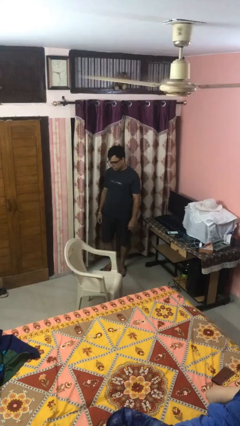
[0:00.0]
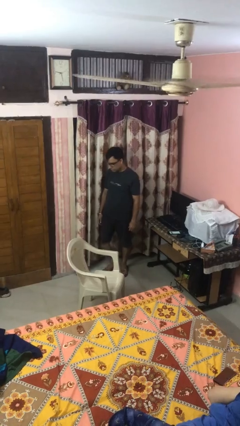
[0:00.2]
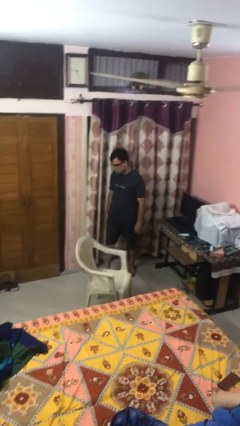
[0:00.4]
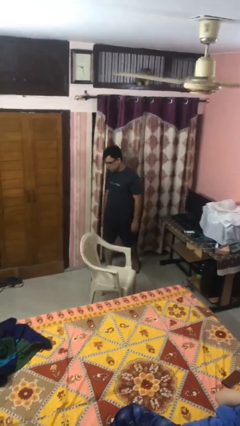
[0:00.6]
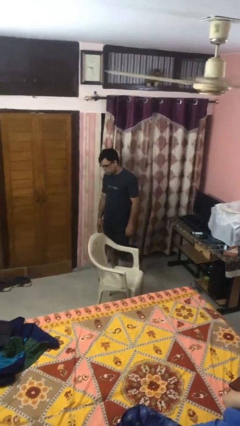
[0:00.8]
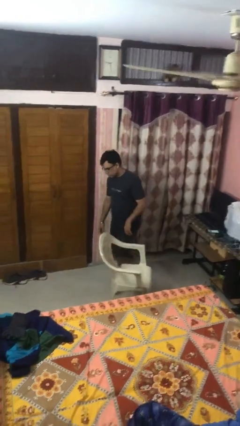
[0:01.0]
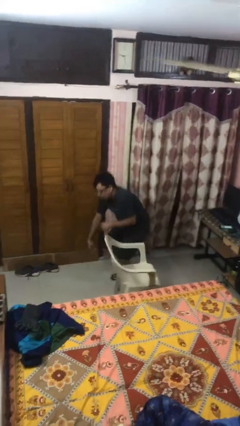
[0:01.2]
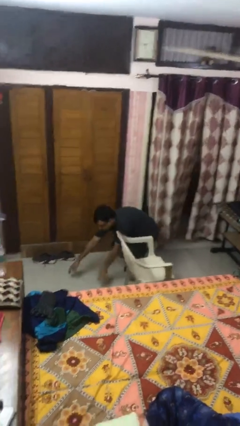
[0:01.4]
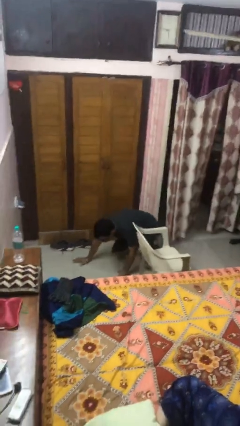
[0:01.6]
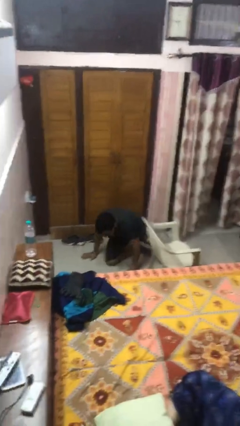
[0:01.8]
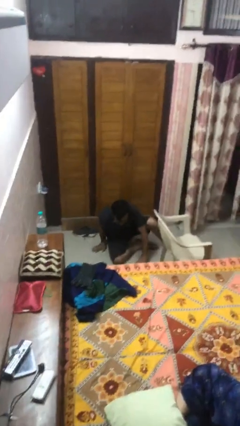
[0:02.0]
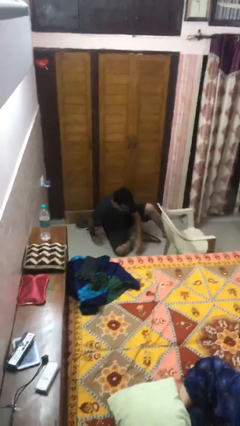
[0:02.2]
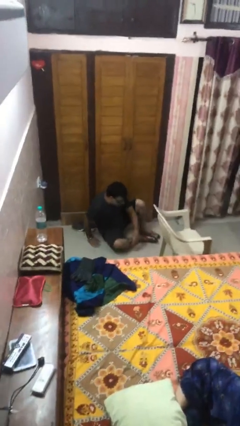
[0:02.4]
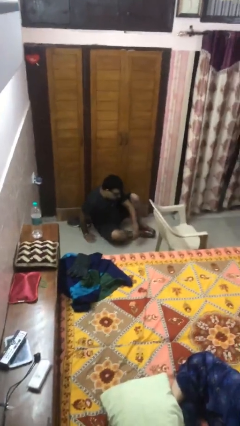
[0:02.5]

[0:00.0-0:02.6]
person trips on object on floor

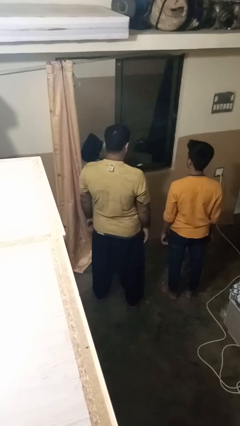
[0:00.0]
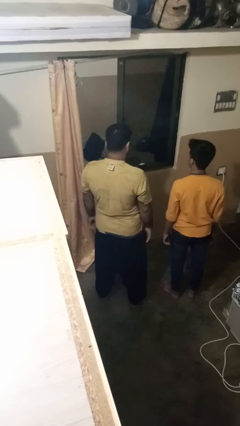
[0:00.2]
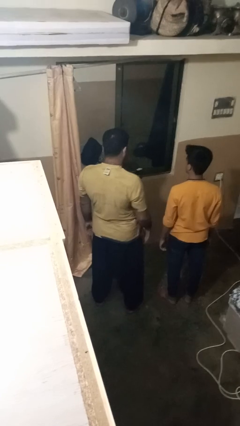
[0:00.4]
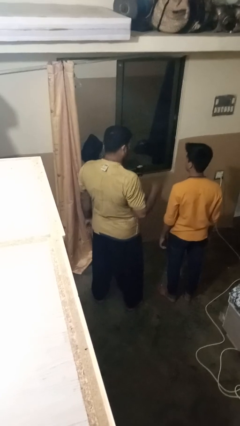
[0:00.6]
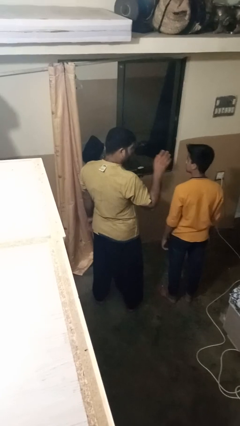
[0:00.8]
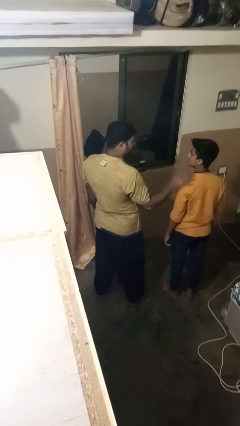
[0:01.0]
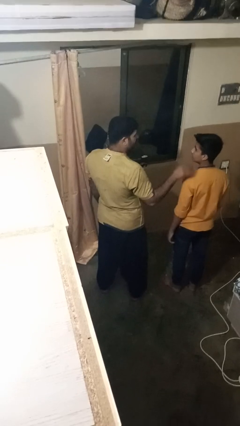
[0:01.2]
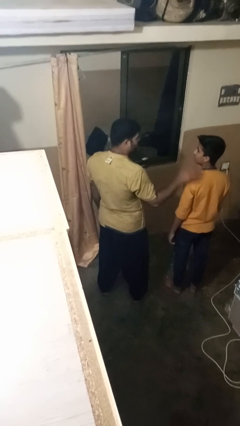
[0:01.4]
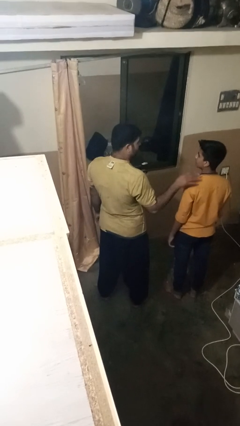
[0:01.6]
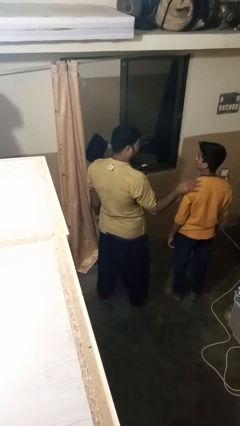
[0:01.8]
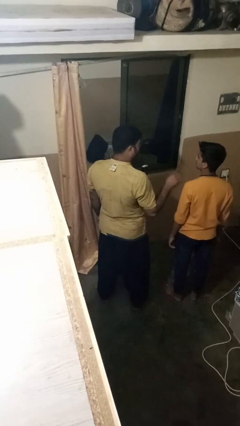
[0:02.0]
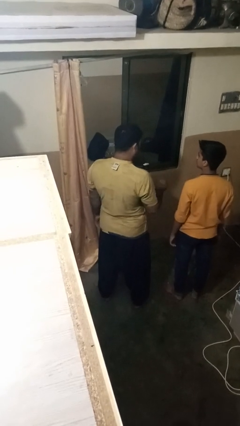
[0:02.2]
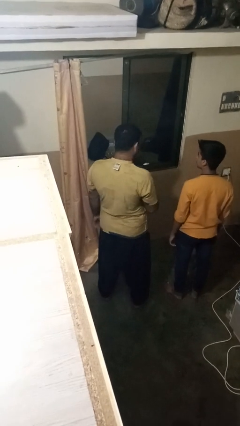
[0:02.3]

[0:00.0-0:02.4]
person pounds shoulders of person

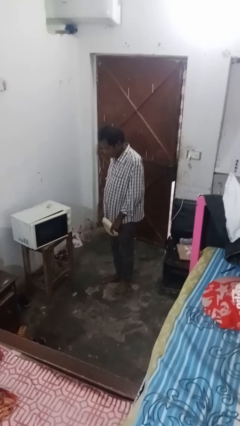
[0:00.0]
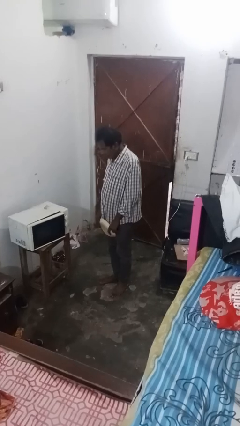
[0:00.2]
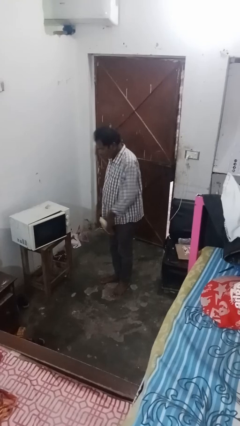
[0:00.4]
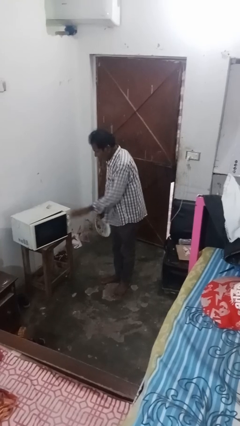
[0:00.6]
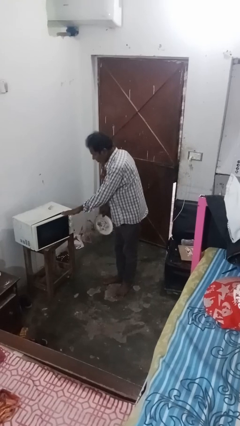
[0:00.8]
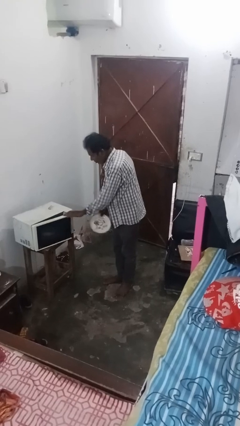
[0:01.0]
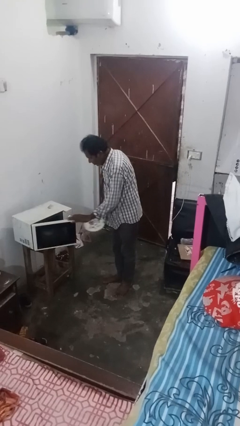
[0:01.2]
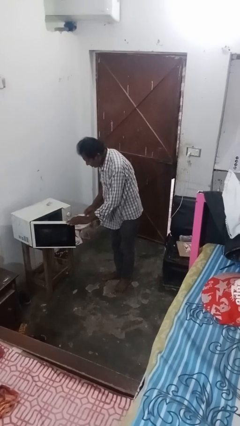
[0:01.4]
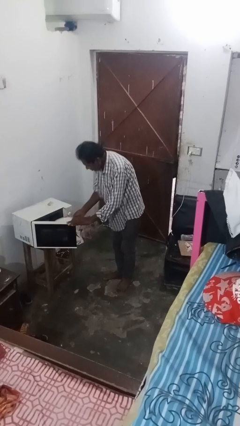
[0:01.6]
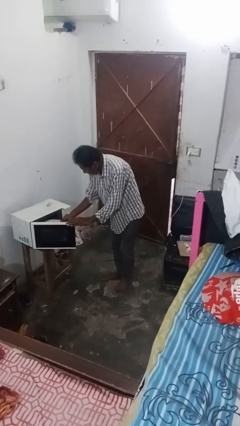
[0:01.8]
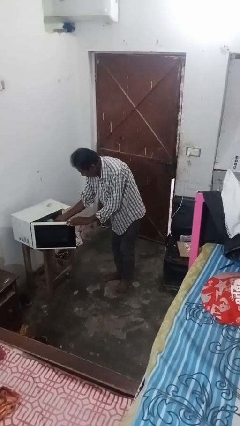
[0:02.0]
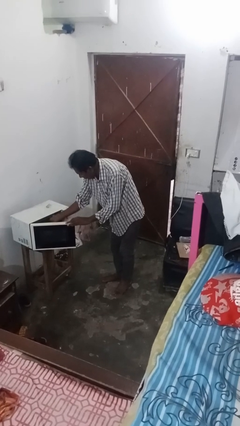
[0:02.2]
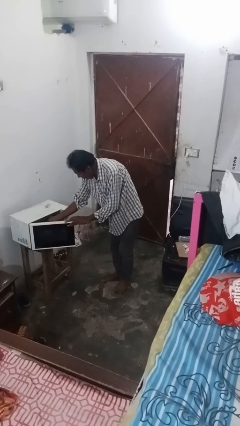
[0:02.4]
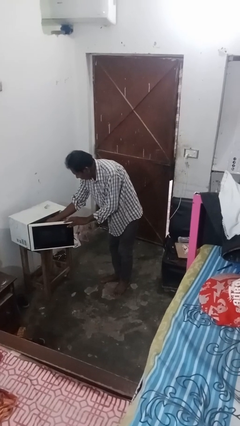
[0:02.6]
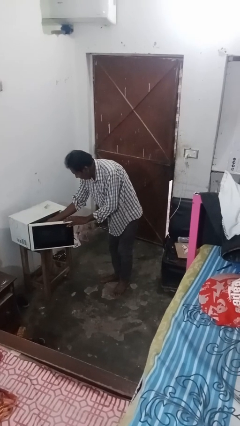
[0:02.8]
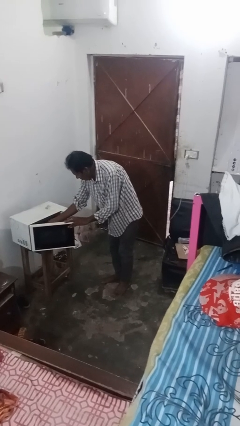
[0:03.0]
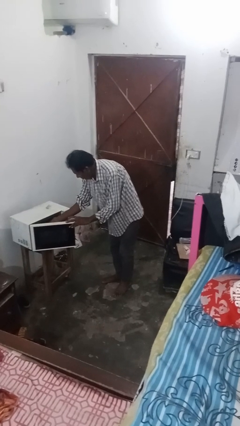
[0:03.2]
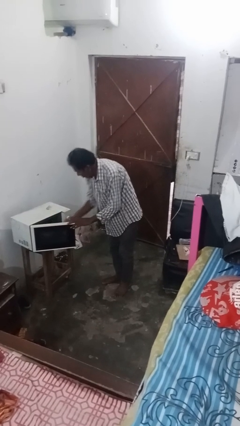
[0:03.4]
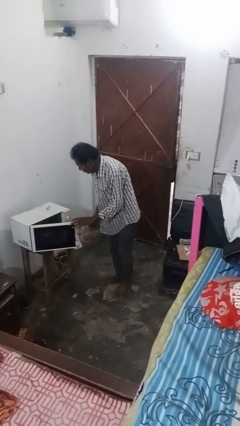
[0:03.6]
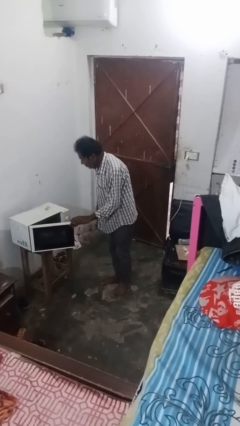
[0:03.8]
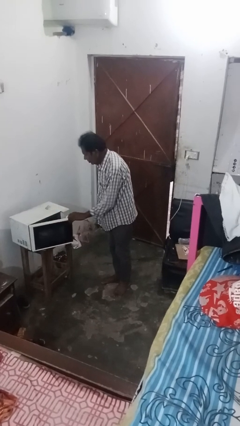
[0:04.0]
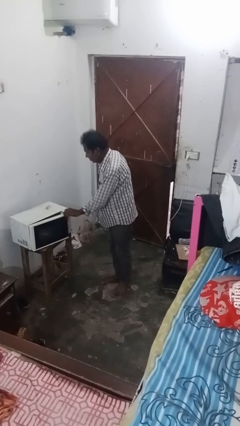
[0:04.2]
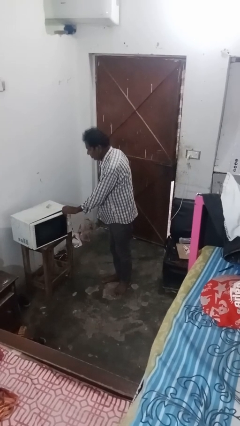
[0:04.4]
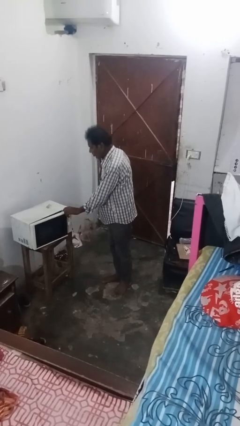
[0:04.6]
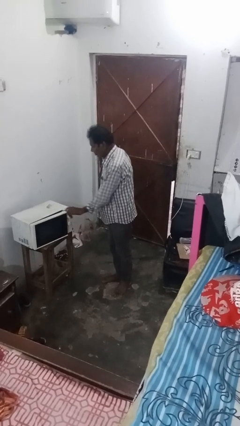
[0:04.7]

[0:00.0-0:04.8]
person puts object into microwave

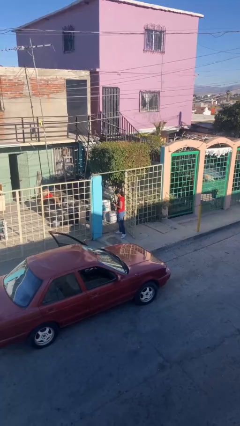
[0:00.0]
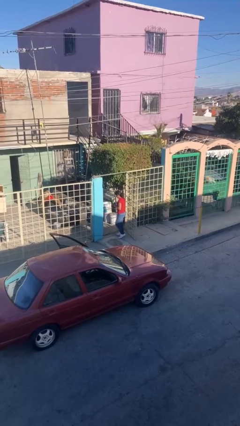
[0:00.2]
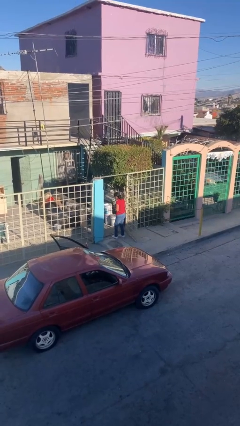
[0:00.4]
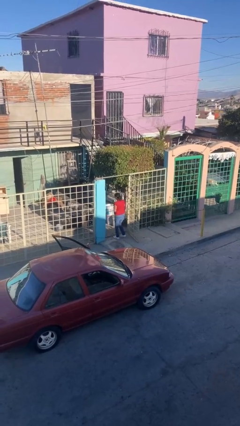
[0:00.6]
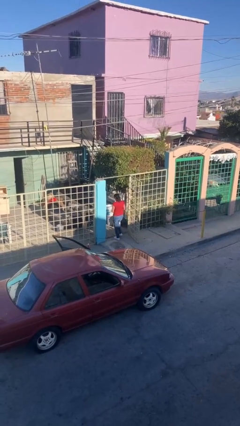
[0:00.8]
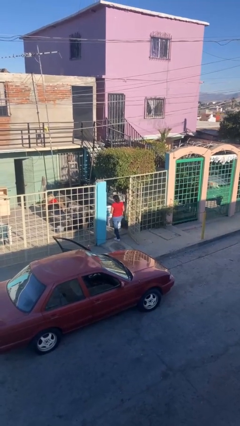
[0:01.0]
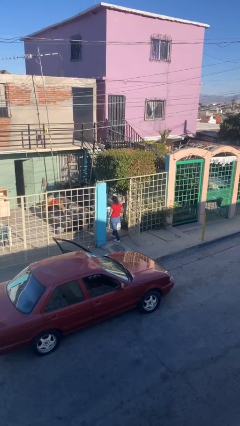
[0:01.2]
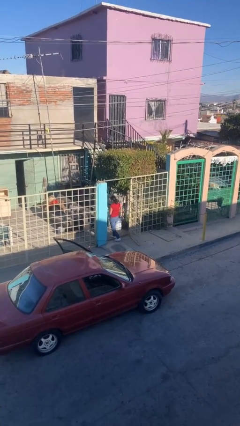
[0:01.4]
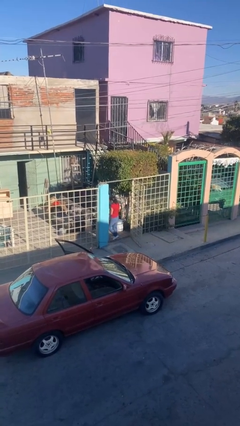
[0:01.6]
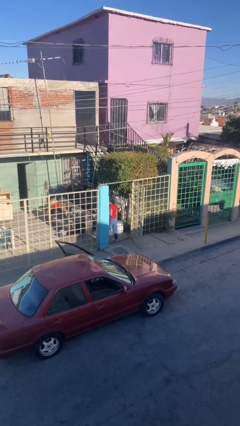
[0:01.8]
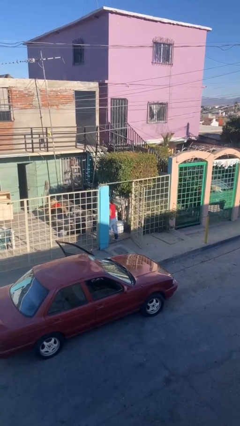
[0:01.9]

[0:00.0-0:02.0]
person exits scene through structure

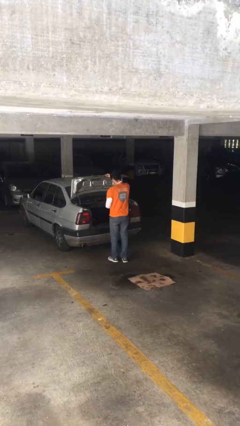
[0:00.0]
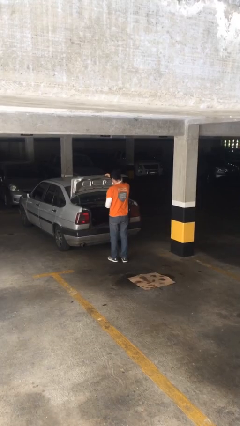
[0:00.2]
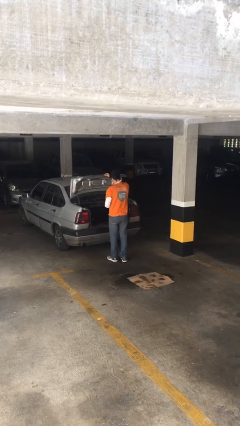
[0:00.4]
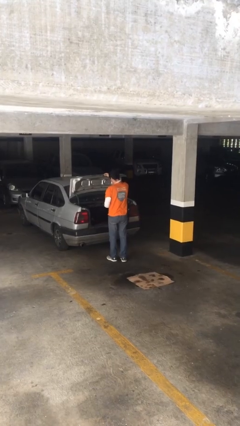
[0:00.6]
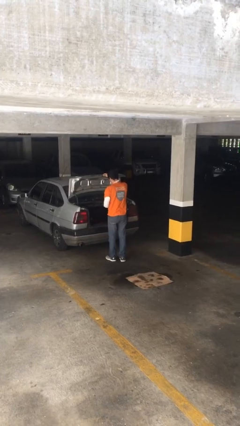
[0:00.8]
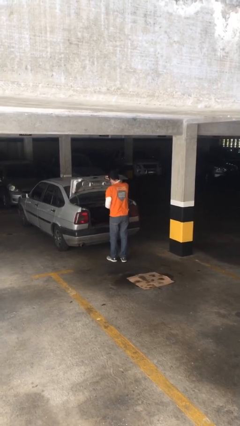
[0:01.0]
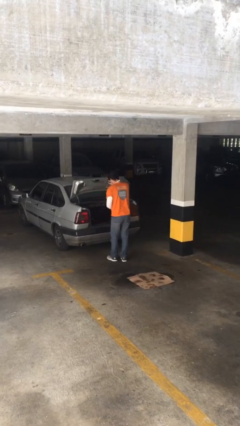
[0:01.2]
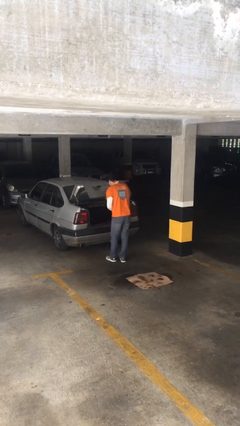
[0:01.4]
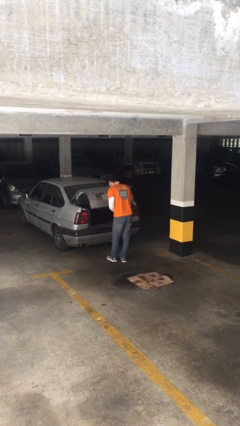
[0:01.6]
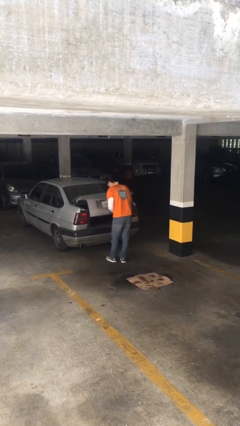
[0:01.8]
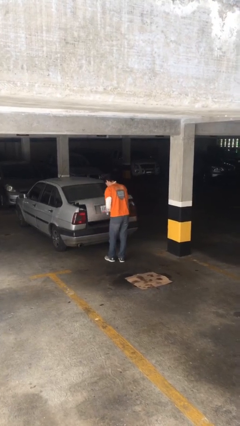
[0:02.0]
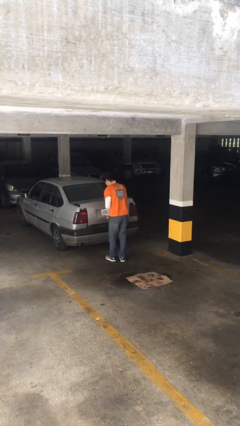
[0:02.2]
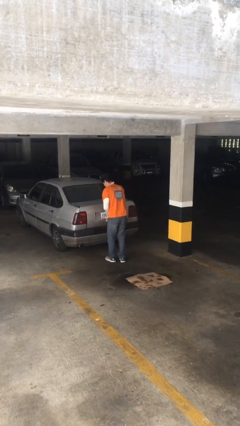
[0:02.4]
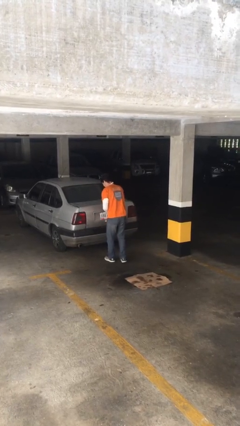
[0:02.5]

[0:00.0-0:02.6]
person closes car trunk

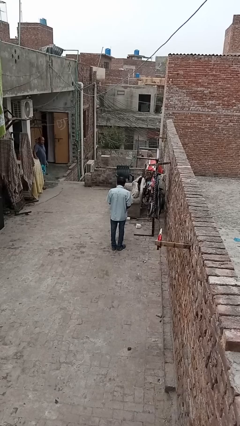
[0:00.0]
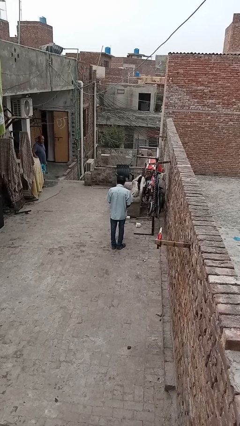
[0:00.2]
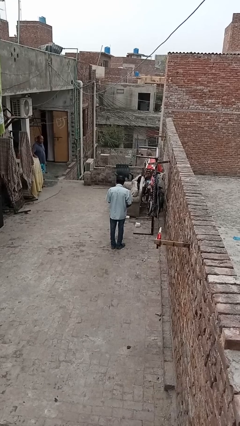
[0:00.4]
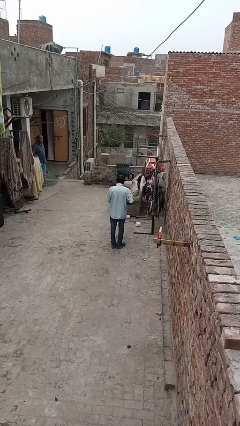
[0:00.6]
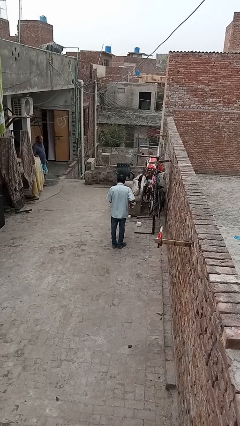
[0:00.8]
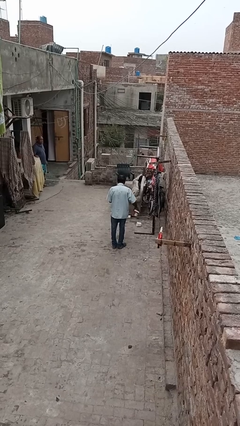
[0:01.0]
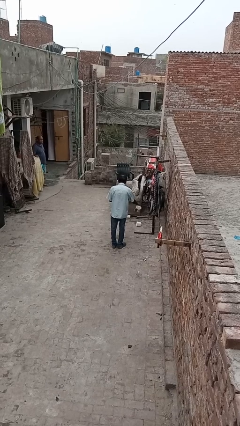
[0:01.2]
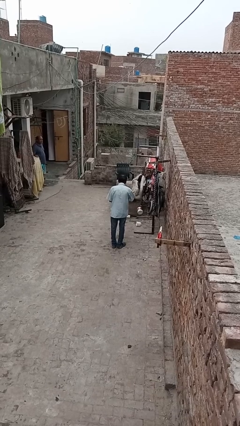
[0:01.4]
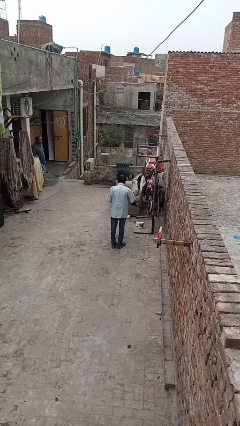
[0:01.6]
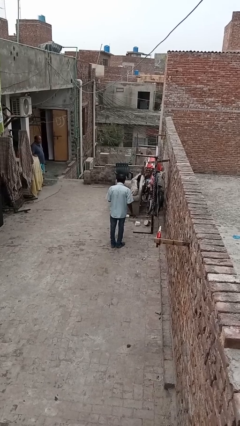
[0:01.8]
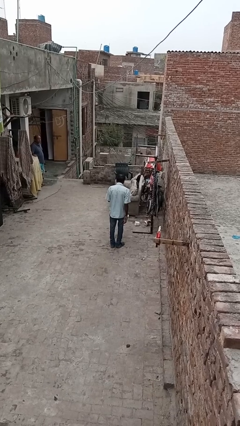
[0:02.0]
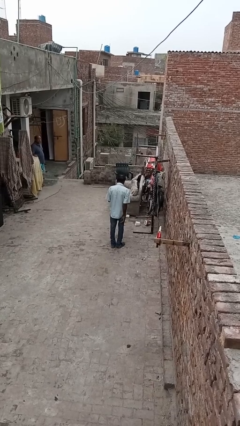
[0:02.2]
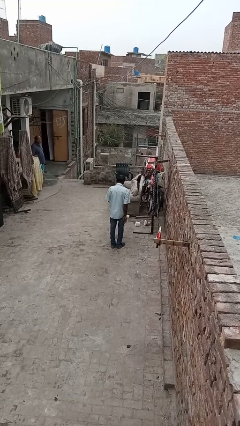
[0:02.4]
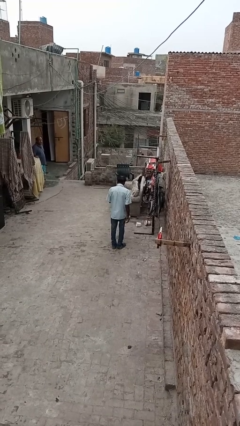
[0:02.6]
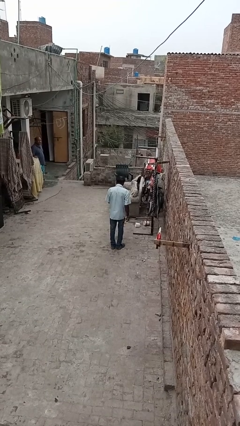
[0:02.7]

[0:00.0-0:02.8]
person cleans table with rag
